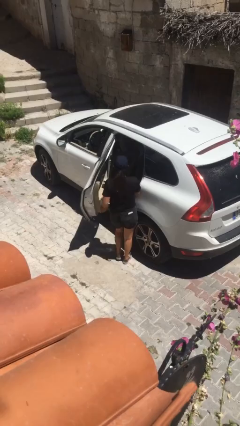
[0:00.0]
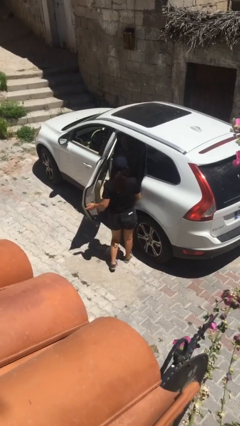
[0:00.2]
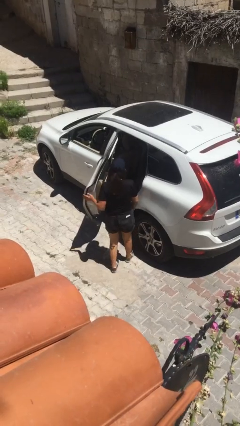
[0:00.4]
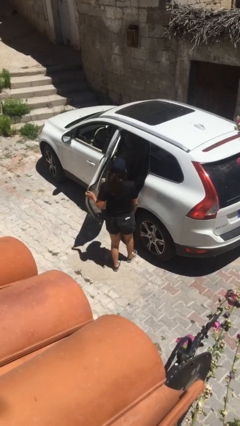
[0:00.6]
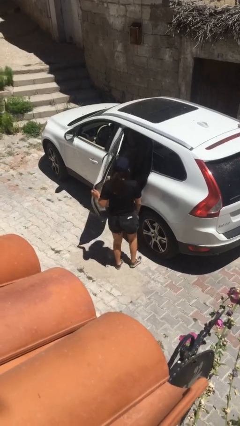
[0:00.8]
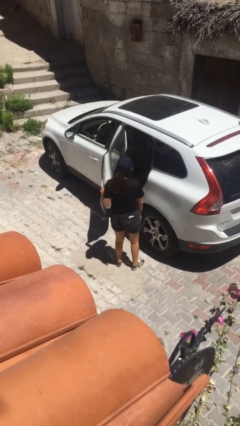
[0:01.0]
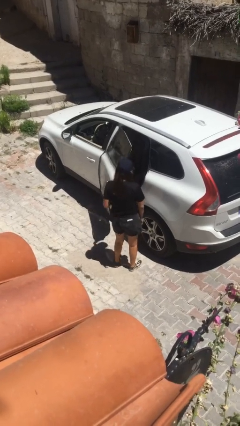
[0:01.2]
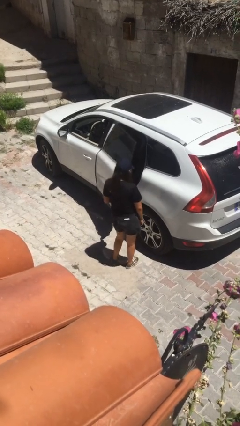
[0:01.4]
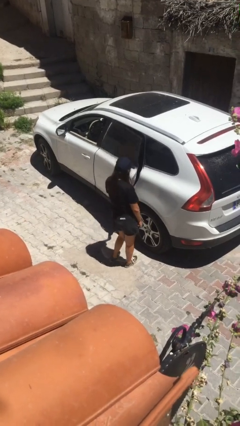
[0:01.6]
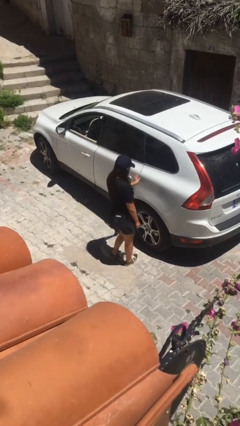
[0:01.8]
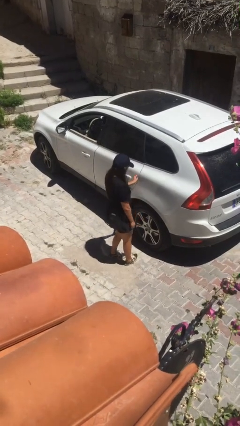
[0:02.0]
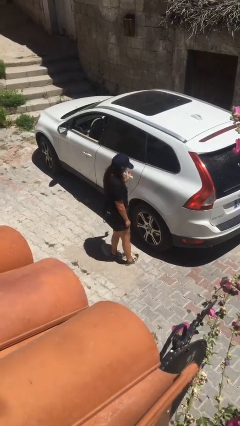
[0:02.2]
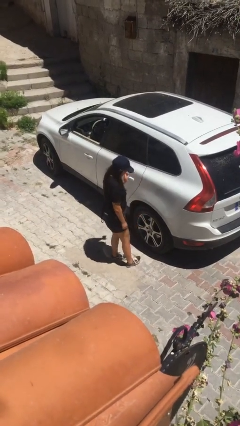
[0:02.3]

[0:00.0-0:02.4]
person closes car door

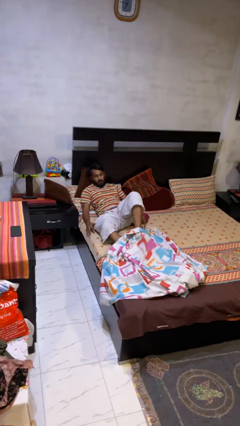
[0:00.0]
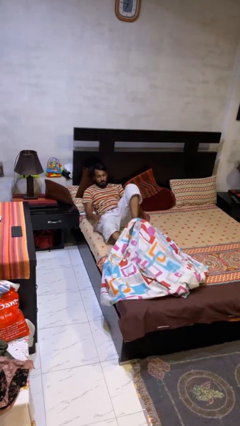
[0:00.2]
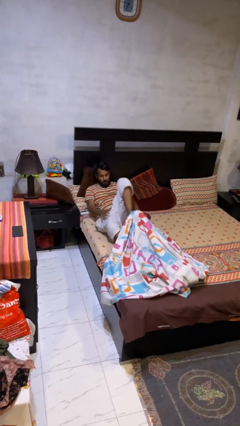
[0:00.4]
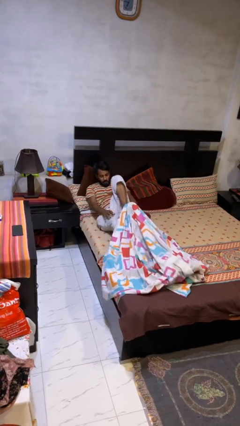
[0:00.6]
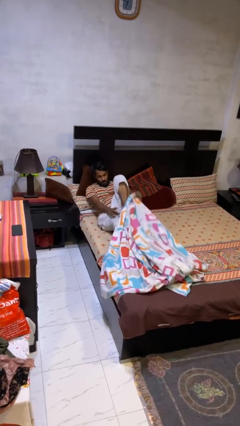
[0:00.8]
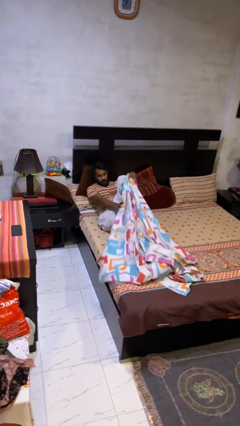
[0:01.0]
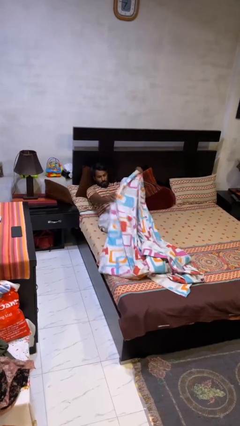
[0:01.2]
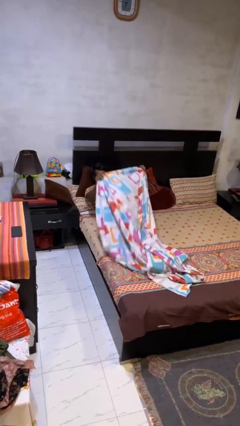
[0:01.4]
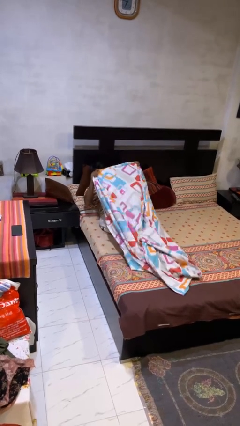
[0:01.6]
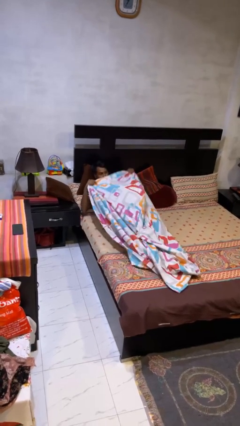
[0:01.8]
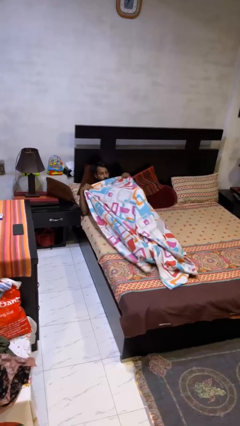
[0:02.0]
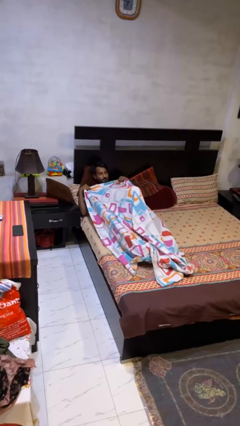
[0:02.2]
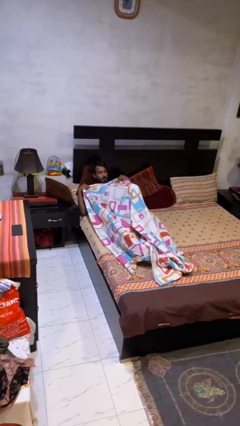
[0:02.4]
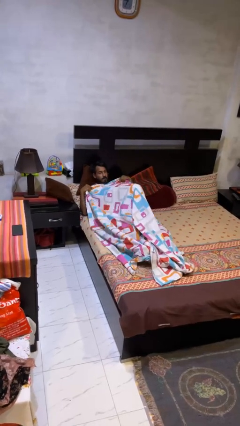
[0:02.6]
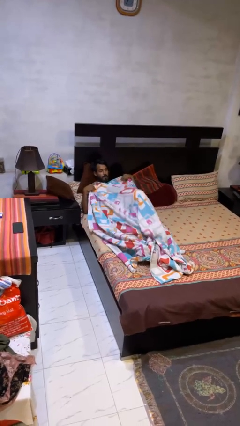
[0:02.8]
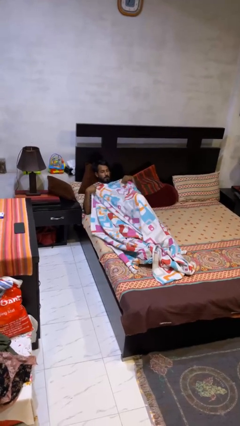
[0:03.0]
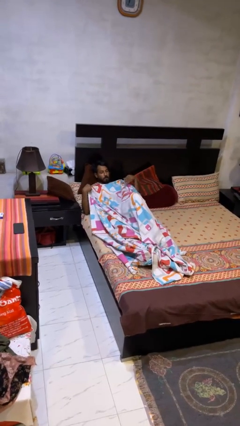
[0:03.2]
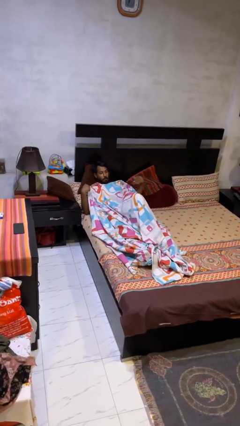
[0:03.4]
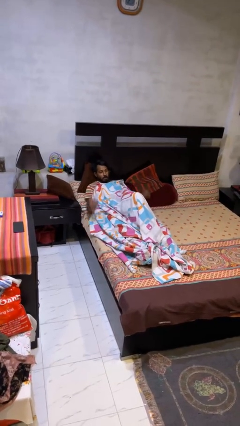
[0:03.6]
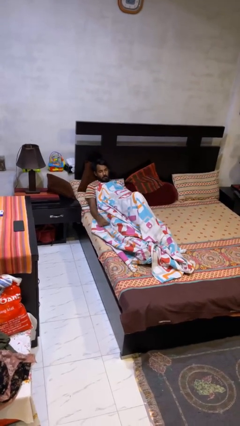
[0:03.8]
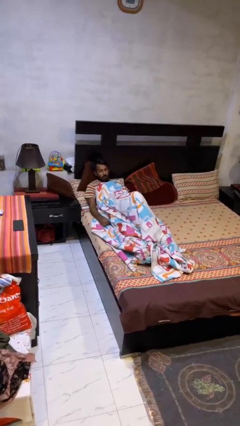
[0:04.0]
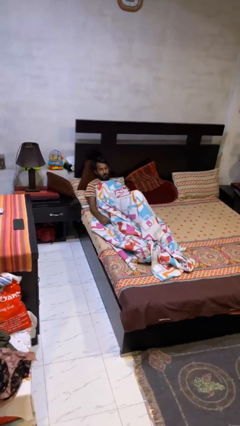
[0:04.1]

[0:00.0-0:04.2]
person covers with bedsheets

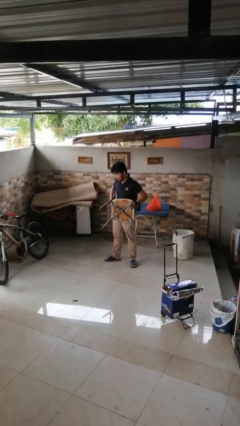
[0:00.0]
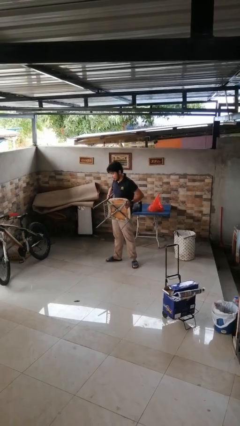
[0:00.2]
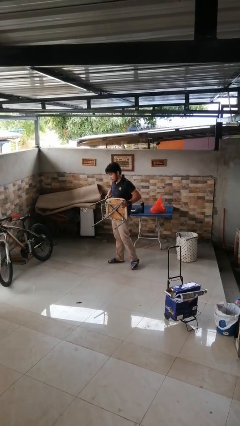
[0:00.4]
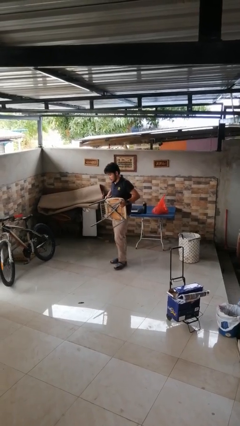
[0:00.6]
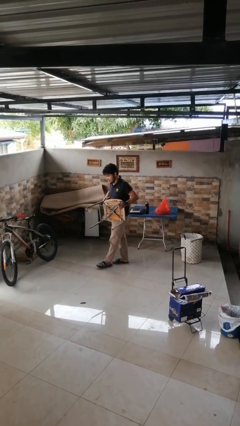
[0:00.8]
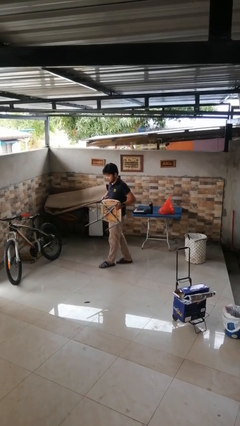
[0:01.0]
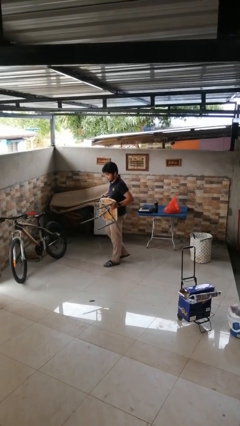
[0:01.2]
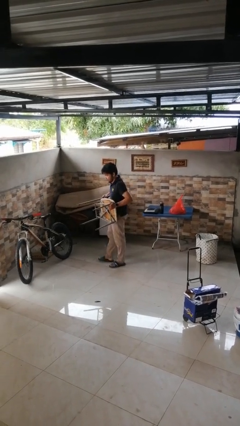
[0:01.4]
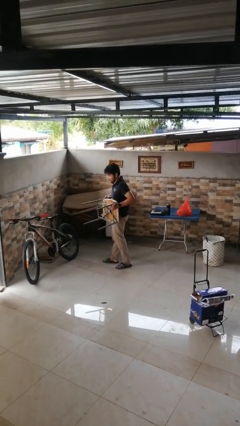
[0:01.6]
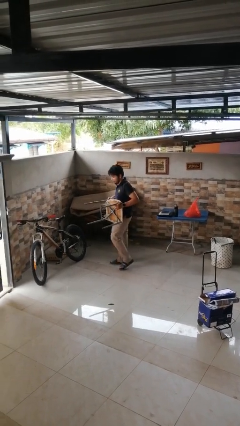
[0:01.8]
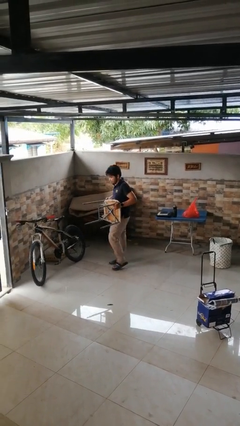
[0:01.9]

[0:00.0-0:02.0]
person carries furniture

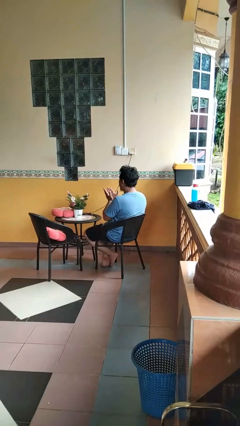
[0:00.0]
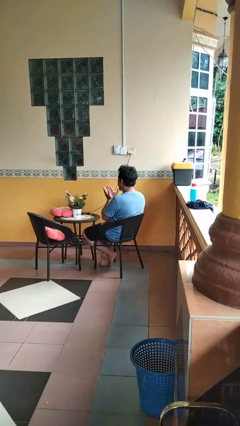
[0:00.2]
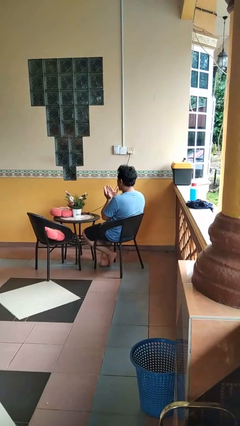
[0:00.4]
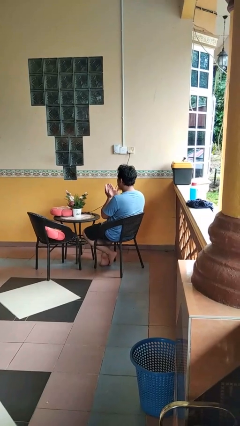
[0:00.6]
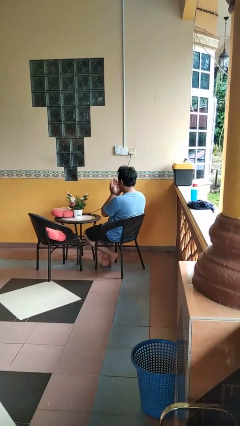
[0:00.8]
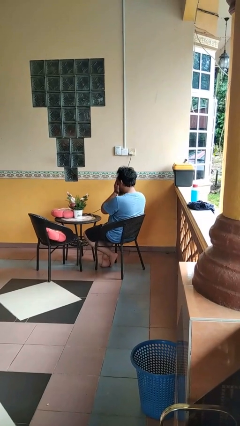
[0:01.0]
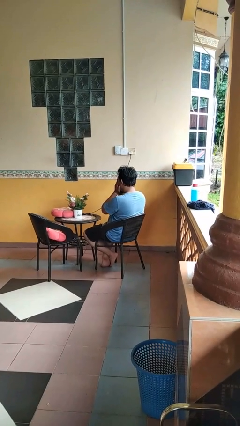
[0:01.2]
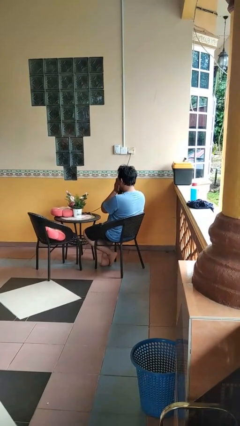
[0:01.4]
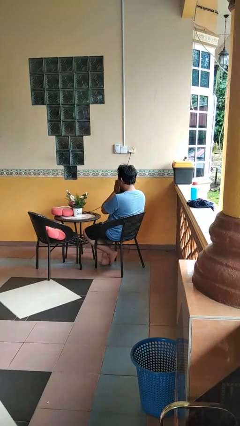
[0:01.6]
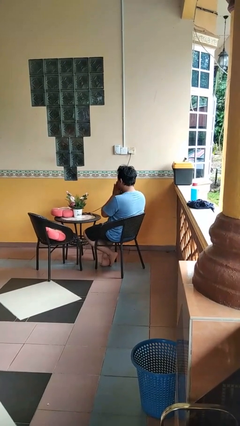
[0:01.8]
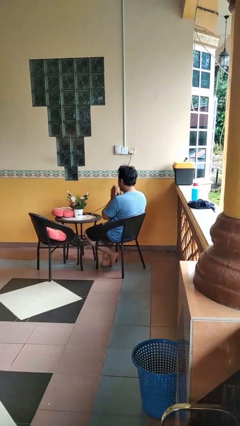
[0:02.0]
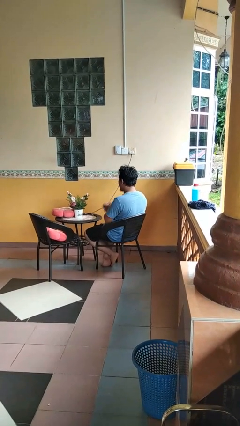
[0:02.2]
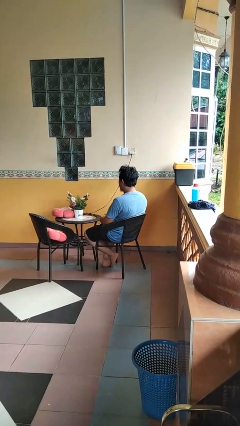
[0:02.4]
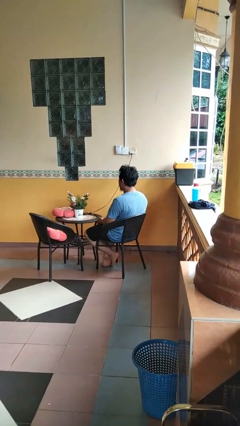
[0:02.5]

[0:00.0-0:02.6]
person prays

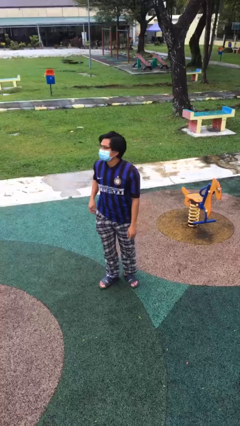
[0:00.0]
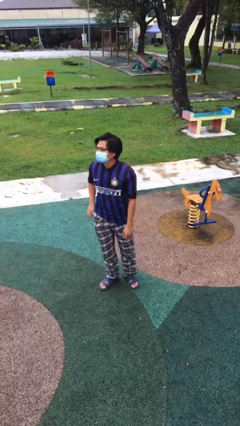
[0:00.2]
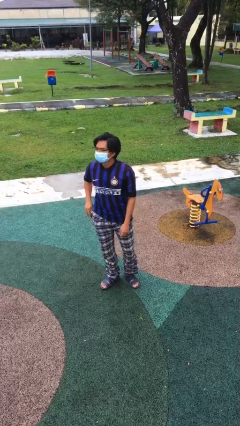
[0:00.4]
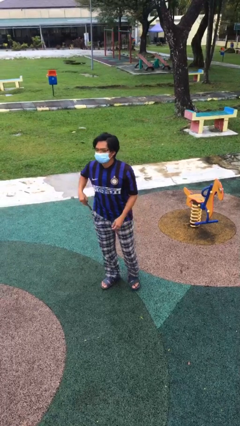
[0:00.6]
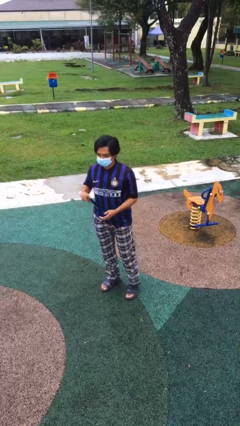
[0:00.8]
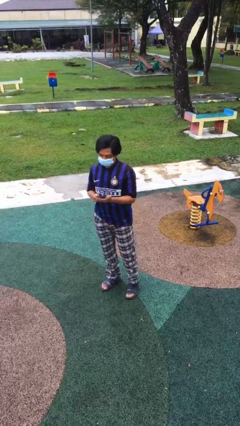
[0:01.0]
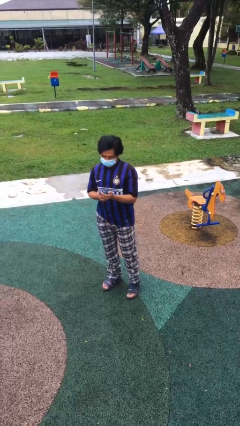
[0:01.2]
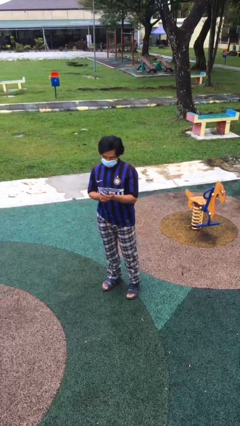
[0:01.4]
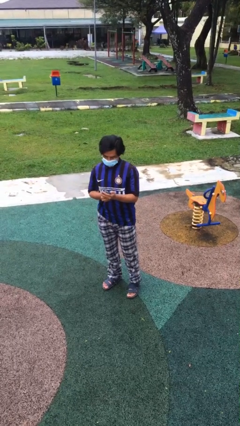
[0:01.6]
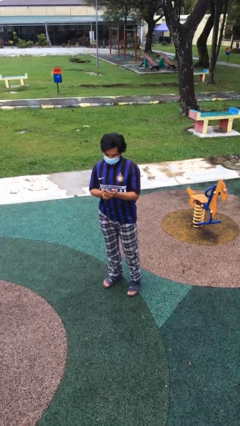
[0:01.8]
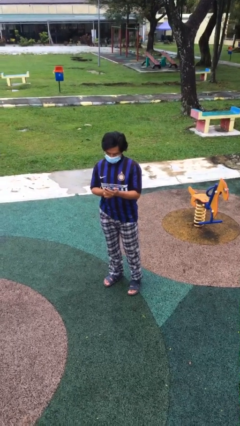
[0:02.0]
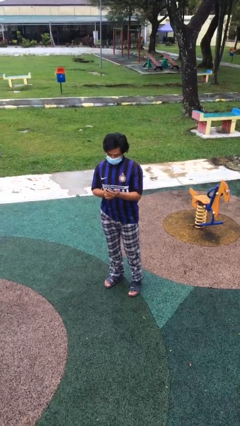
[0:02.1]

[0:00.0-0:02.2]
person takes phone from pocket

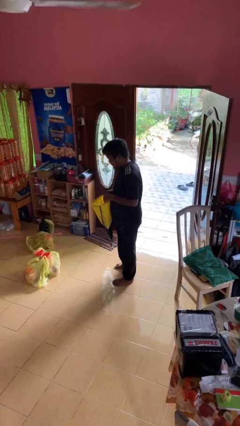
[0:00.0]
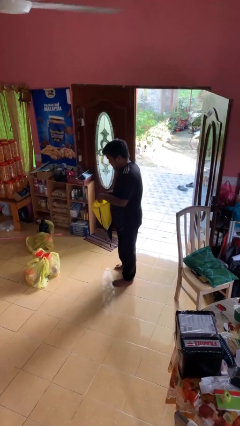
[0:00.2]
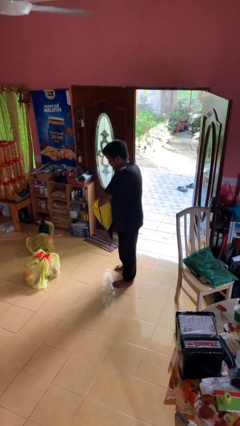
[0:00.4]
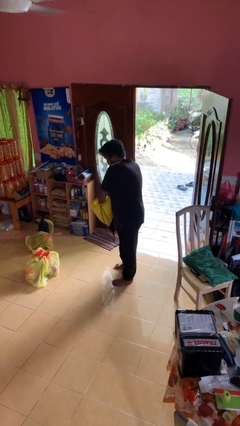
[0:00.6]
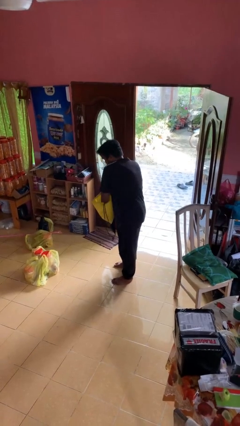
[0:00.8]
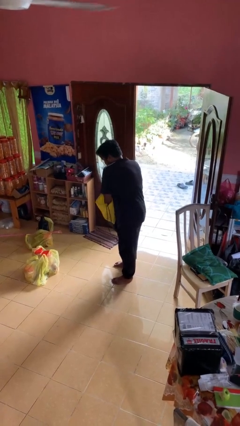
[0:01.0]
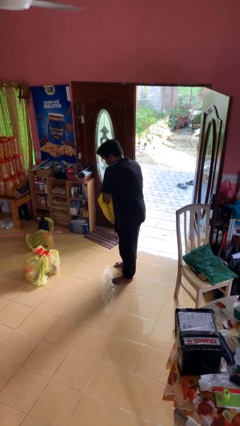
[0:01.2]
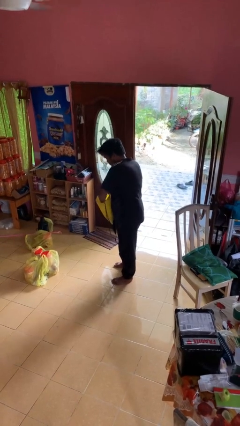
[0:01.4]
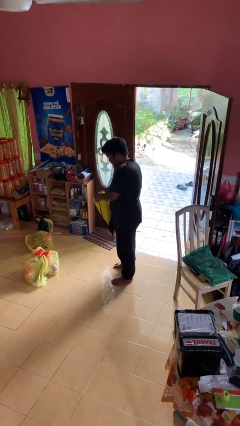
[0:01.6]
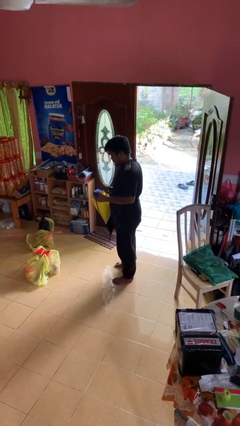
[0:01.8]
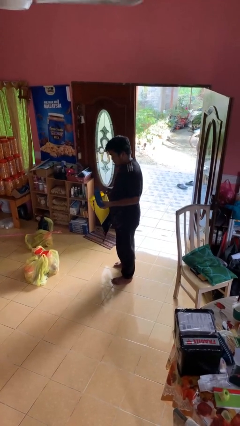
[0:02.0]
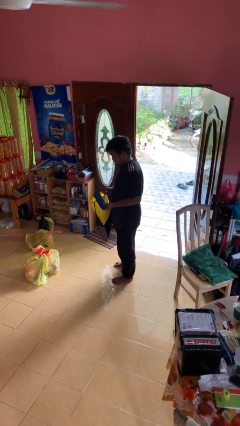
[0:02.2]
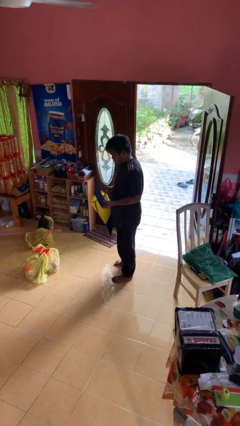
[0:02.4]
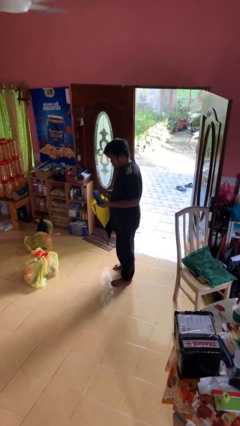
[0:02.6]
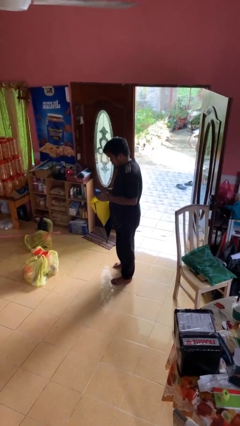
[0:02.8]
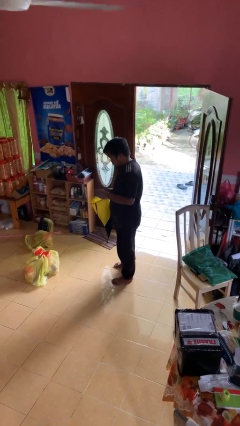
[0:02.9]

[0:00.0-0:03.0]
person takes object from bag

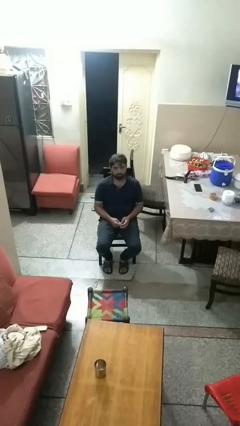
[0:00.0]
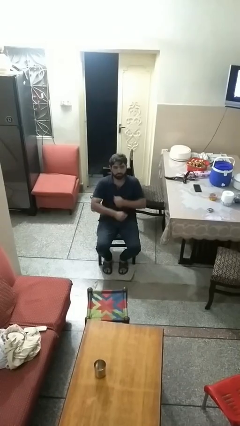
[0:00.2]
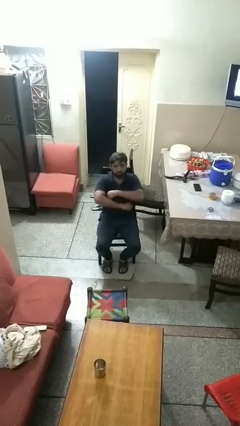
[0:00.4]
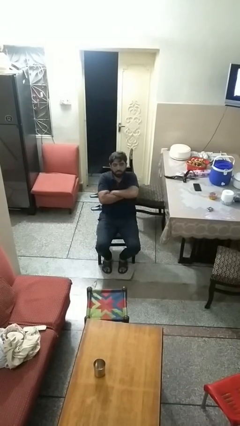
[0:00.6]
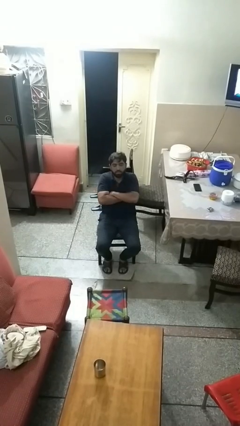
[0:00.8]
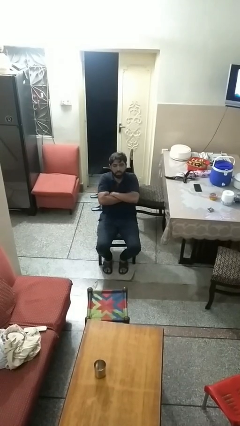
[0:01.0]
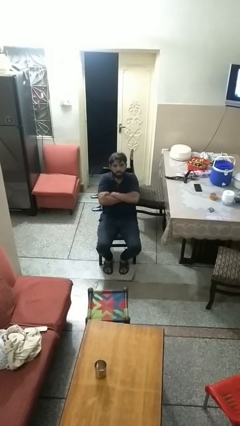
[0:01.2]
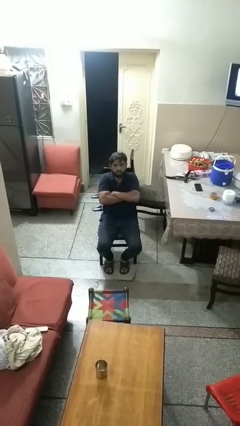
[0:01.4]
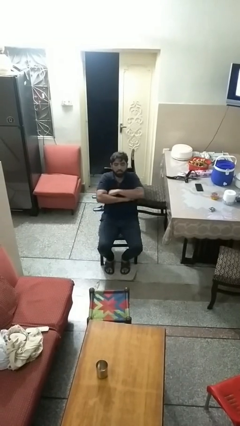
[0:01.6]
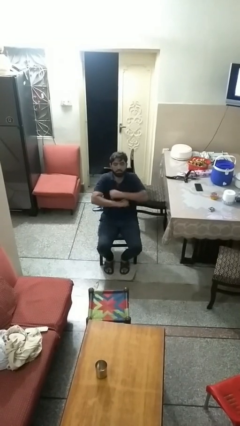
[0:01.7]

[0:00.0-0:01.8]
person gestures arms x
